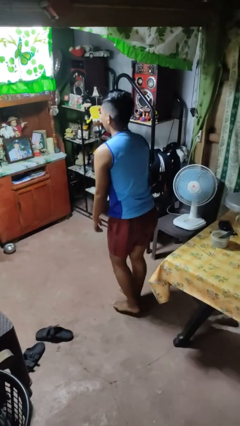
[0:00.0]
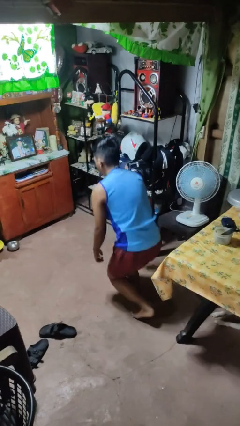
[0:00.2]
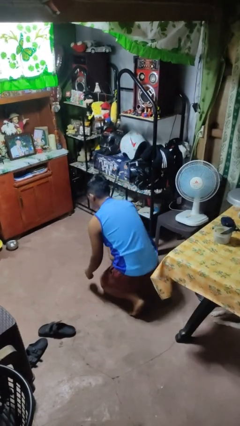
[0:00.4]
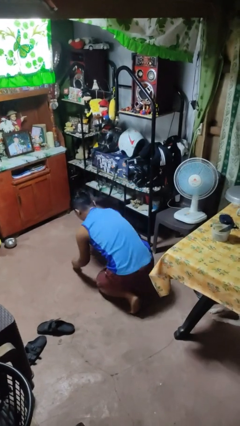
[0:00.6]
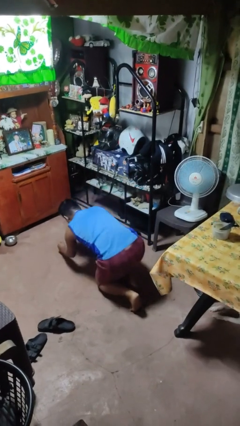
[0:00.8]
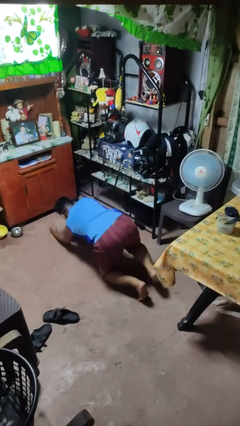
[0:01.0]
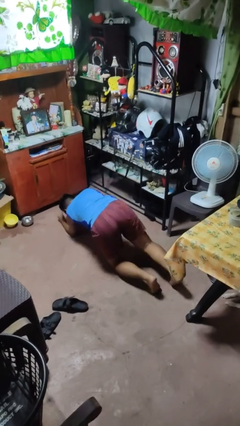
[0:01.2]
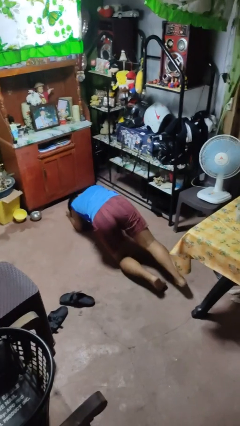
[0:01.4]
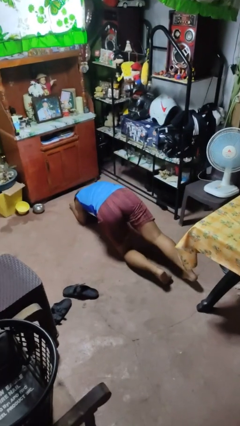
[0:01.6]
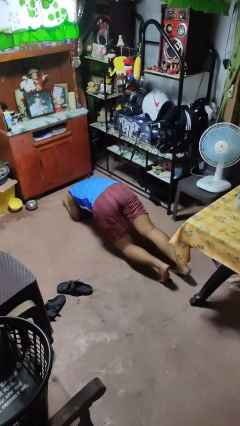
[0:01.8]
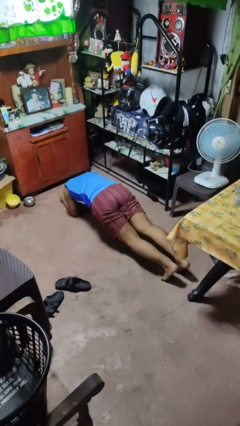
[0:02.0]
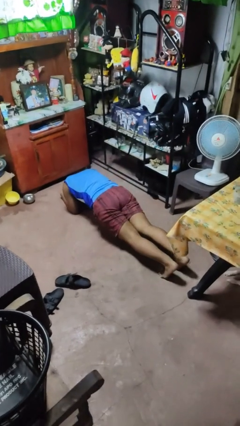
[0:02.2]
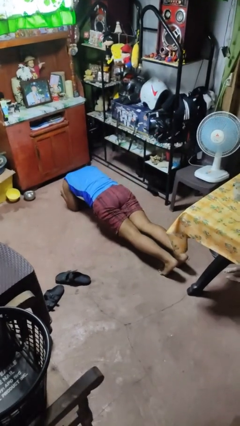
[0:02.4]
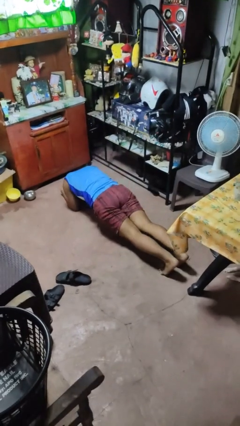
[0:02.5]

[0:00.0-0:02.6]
person exercises with plank

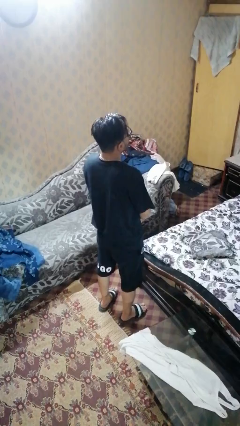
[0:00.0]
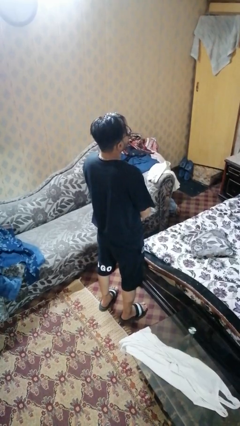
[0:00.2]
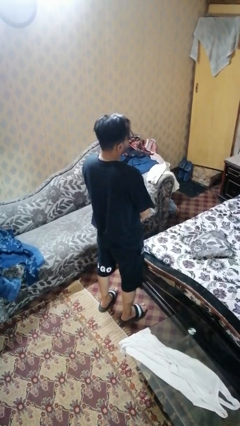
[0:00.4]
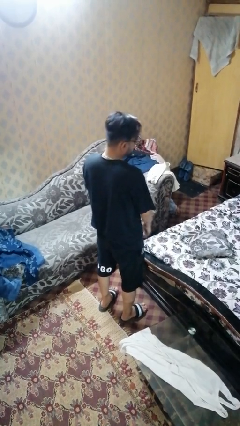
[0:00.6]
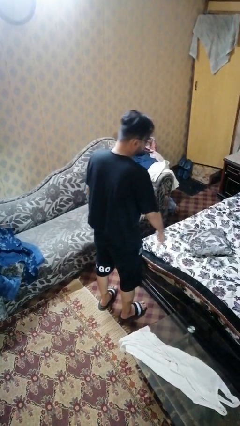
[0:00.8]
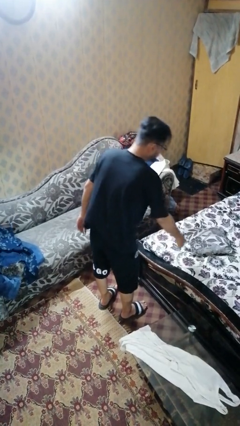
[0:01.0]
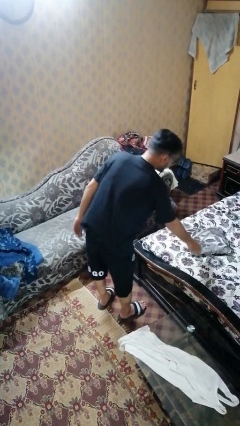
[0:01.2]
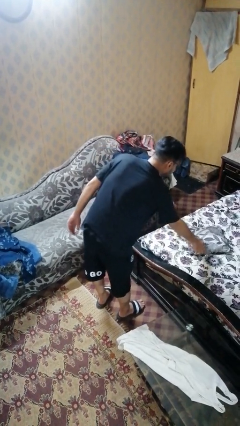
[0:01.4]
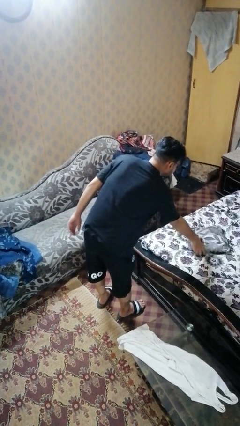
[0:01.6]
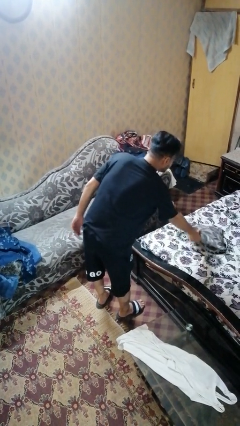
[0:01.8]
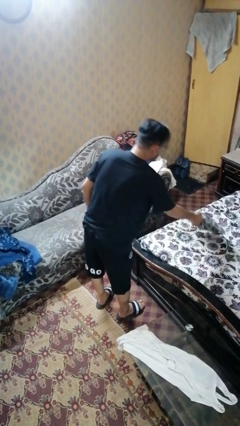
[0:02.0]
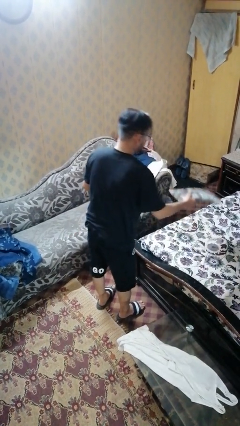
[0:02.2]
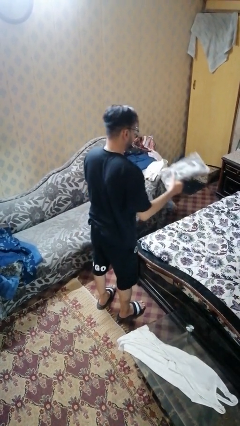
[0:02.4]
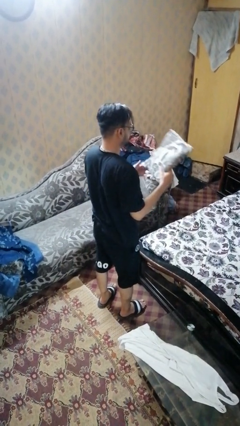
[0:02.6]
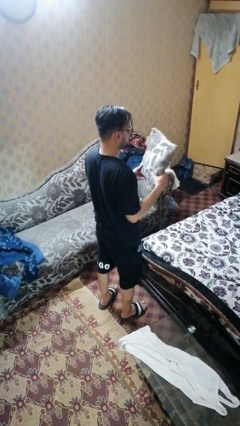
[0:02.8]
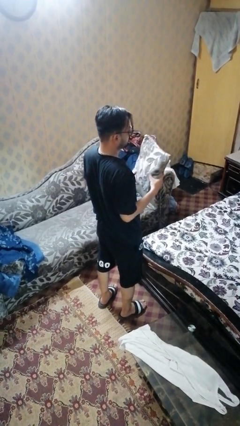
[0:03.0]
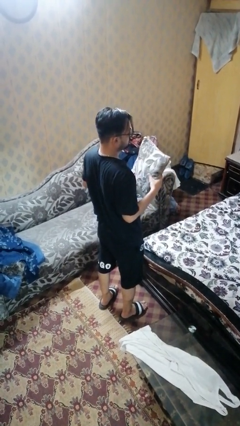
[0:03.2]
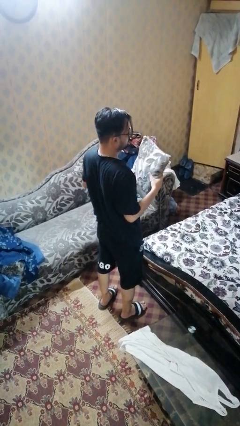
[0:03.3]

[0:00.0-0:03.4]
person picks up object from bed

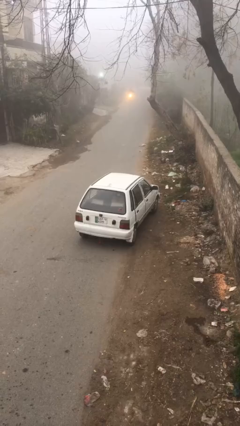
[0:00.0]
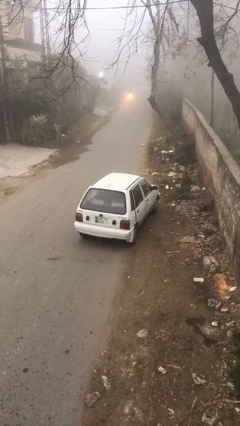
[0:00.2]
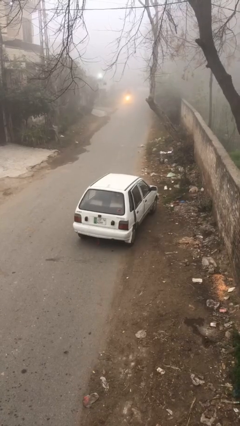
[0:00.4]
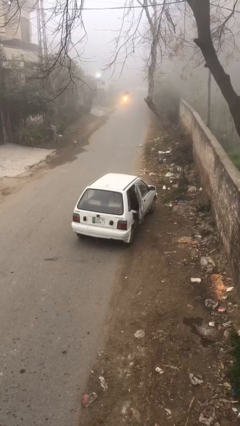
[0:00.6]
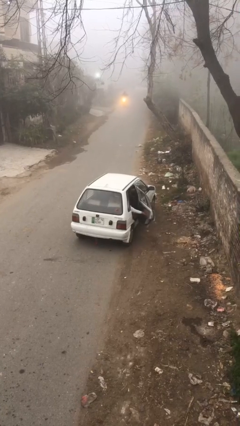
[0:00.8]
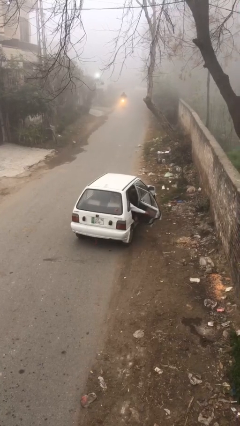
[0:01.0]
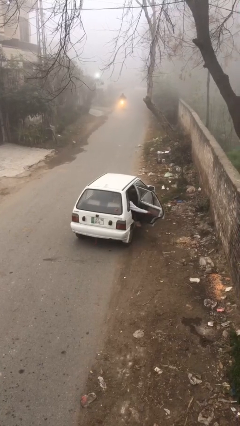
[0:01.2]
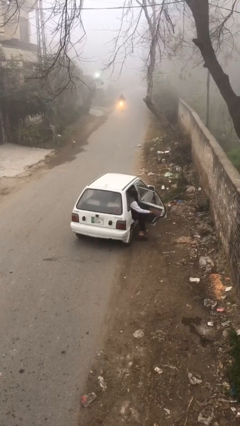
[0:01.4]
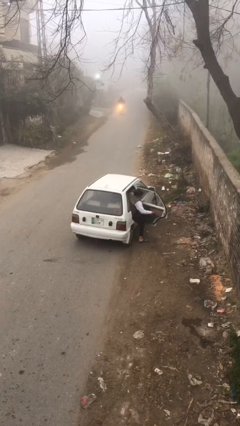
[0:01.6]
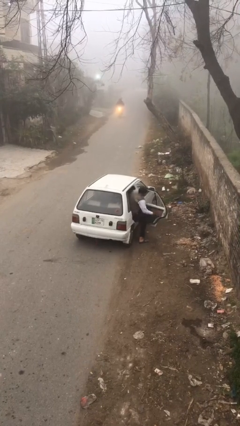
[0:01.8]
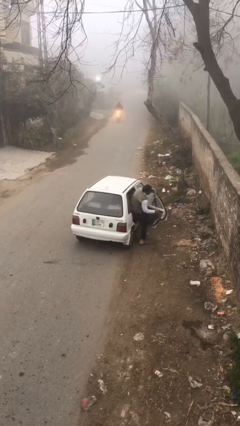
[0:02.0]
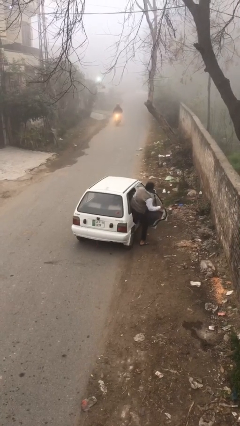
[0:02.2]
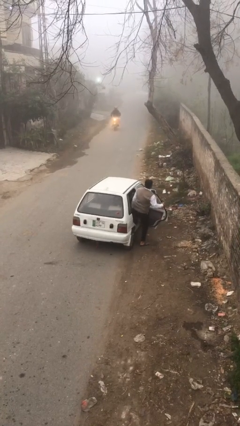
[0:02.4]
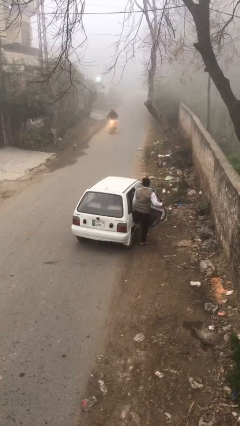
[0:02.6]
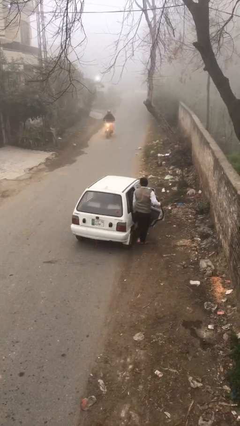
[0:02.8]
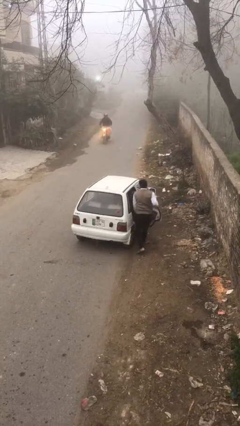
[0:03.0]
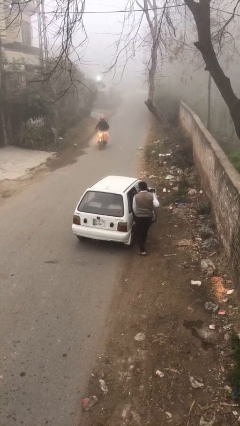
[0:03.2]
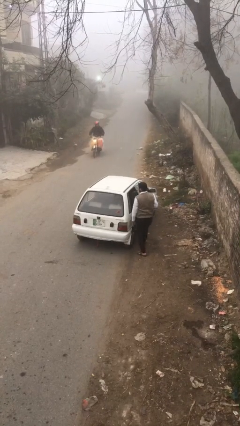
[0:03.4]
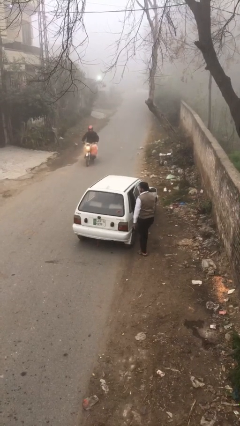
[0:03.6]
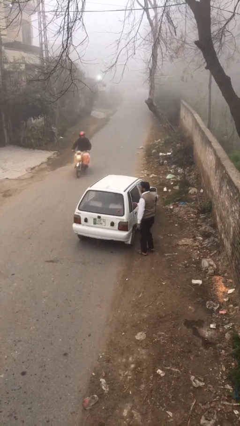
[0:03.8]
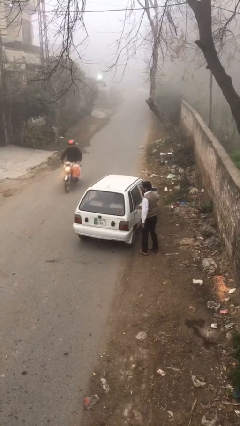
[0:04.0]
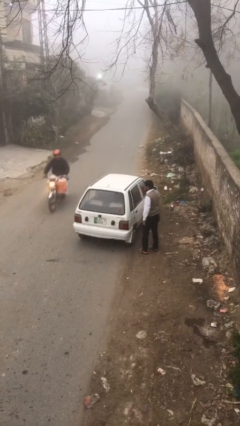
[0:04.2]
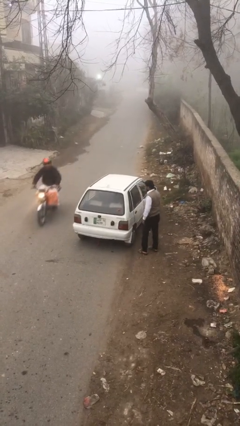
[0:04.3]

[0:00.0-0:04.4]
car drops off person

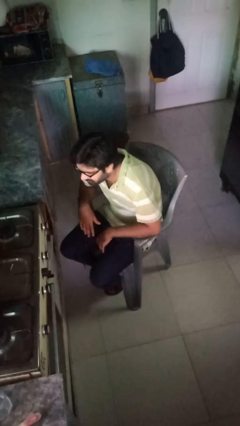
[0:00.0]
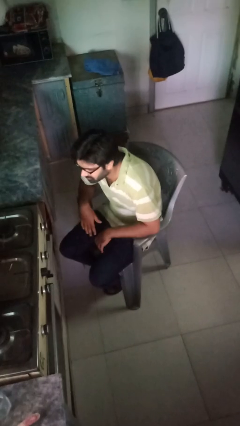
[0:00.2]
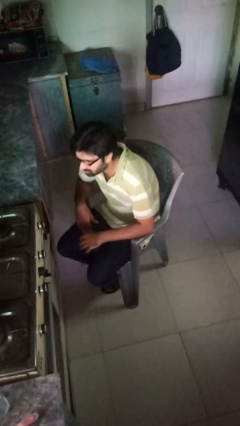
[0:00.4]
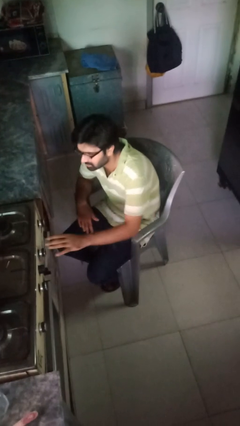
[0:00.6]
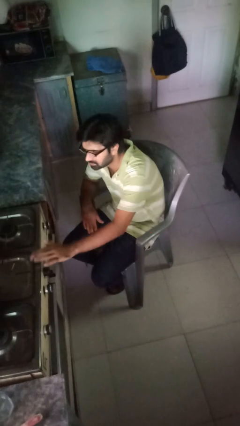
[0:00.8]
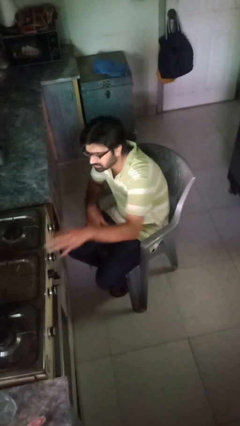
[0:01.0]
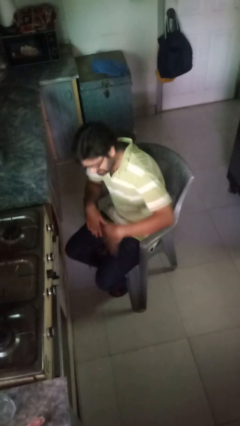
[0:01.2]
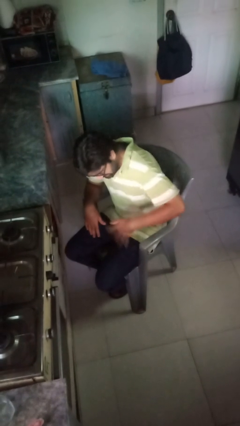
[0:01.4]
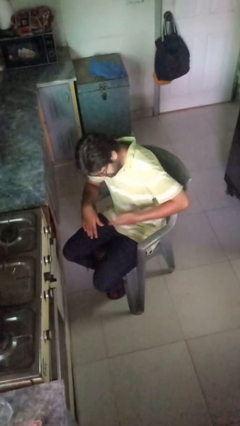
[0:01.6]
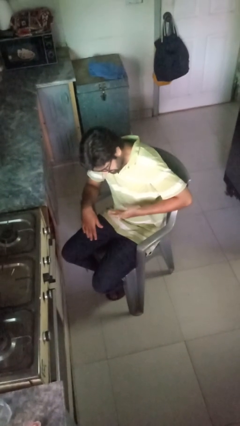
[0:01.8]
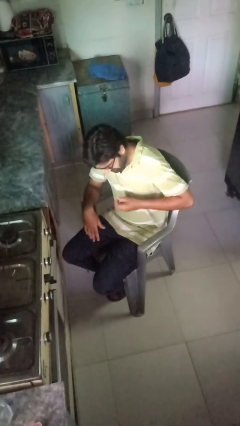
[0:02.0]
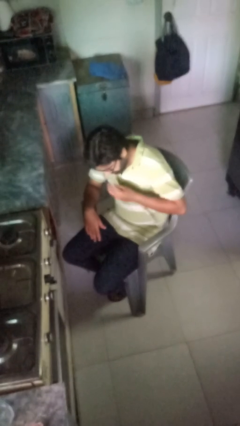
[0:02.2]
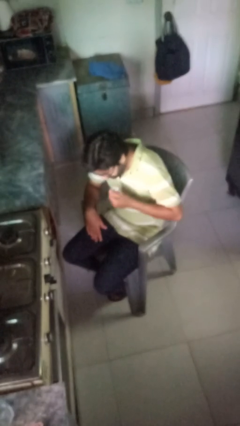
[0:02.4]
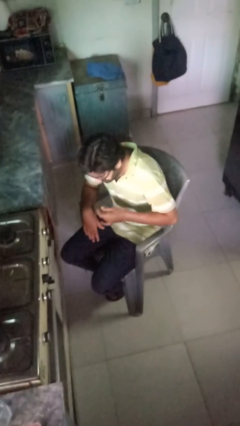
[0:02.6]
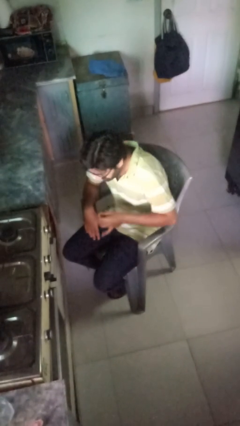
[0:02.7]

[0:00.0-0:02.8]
person burns hand

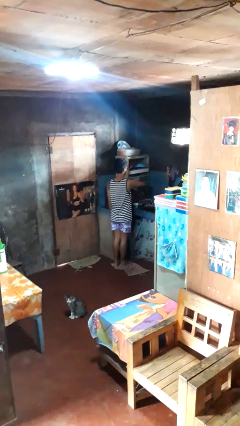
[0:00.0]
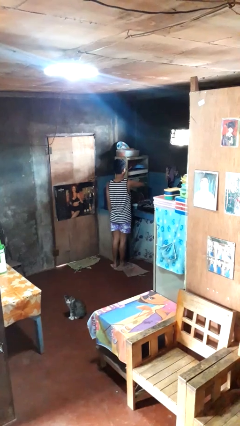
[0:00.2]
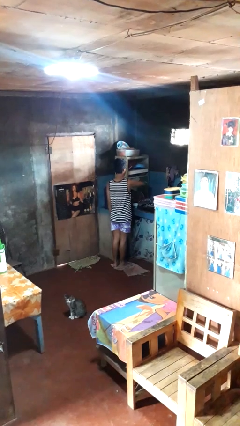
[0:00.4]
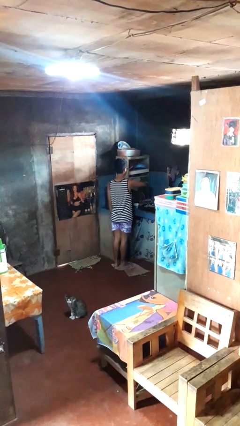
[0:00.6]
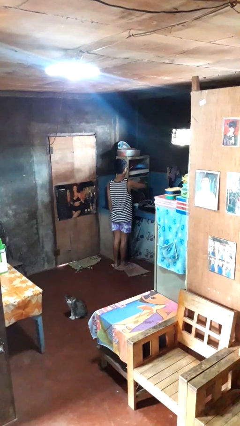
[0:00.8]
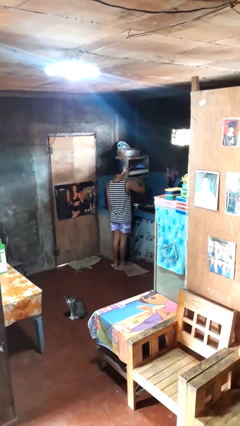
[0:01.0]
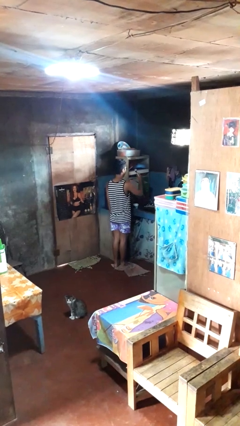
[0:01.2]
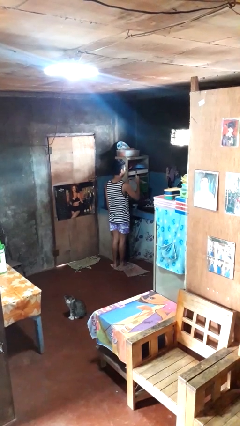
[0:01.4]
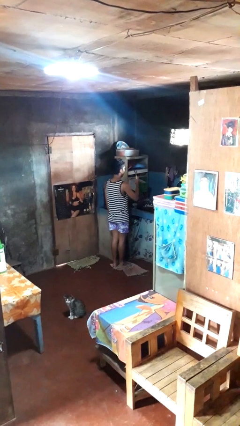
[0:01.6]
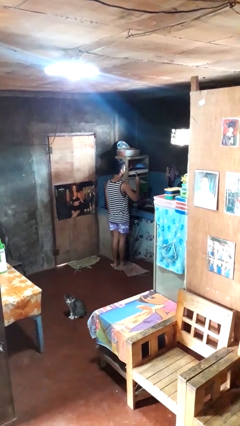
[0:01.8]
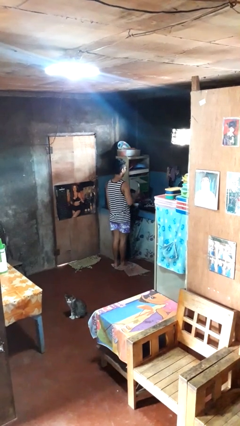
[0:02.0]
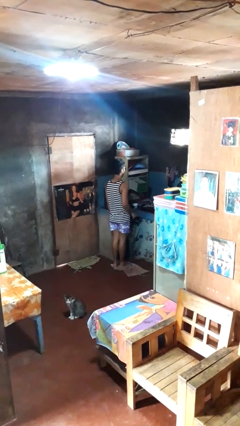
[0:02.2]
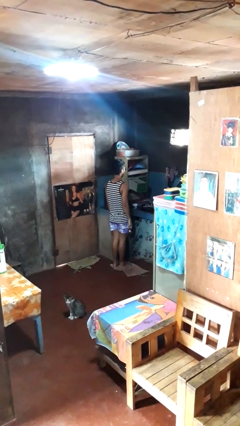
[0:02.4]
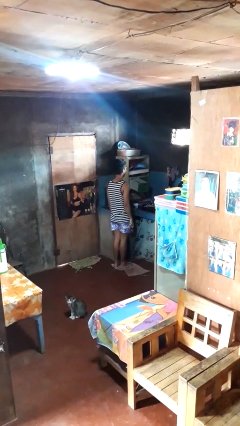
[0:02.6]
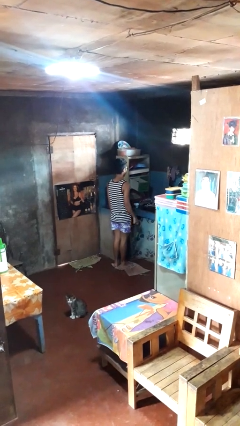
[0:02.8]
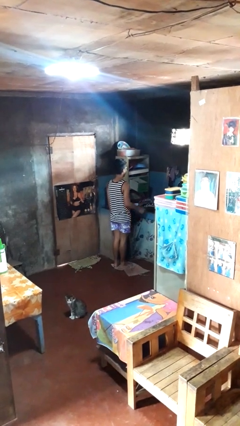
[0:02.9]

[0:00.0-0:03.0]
person takes object from kitchen drawer

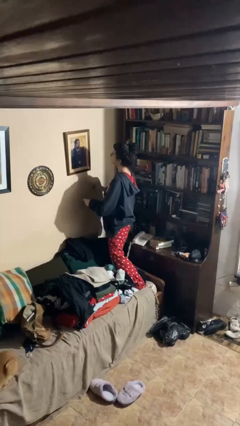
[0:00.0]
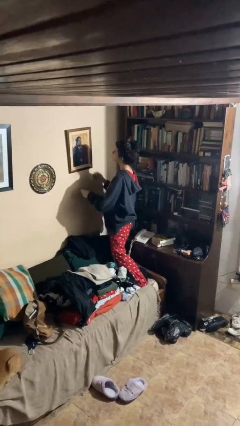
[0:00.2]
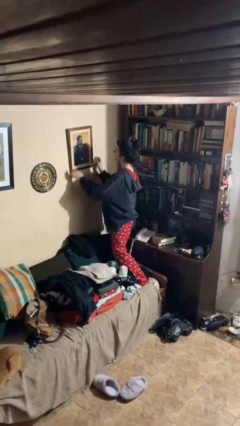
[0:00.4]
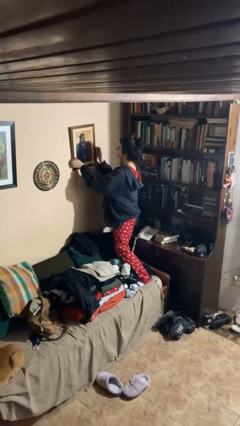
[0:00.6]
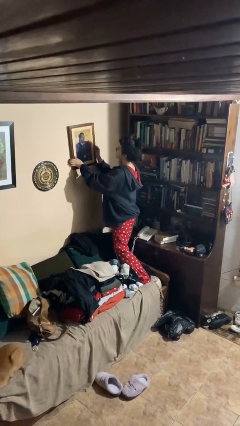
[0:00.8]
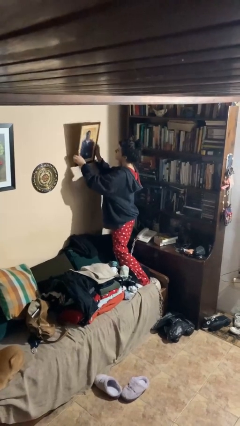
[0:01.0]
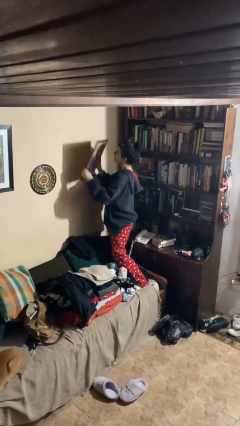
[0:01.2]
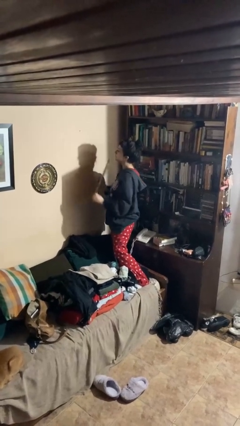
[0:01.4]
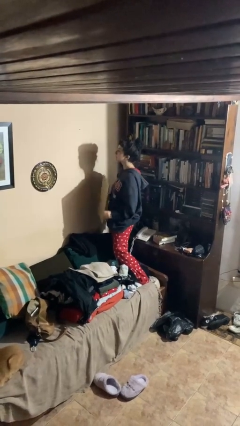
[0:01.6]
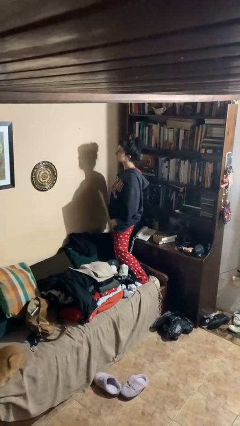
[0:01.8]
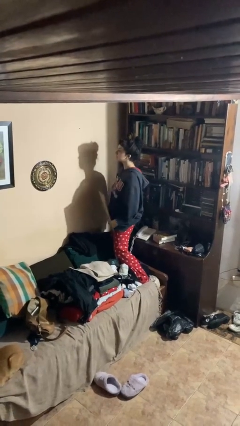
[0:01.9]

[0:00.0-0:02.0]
person takes down picture frame
